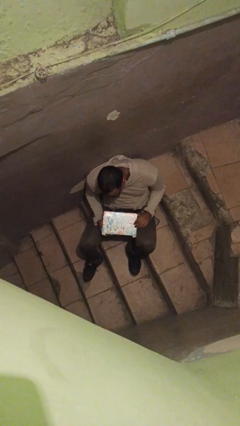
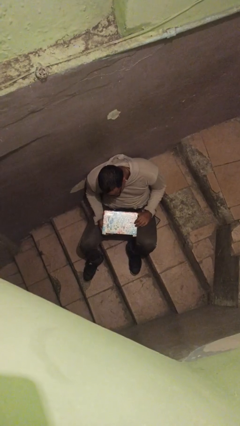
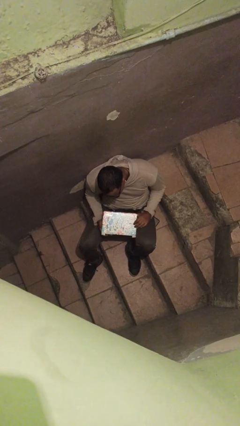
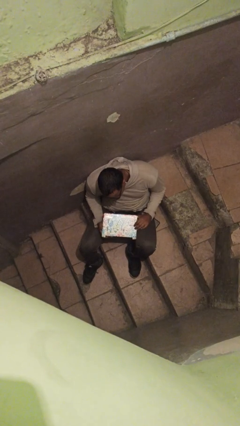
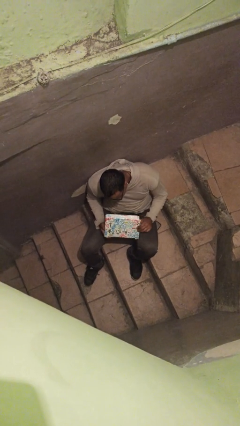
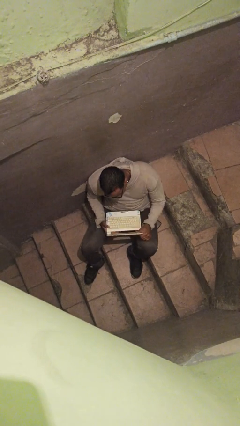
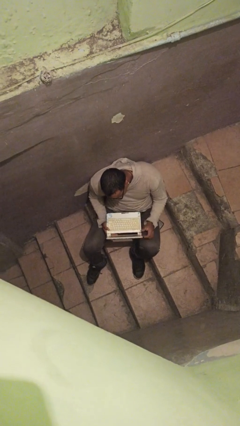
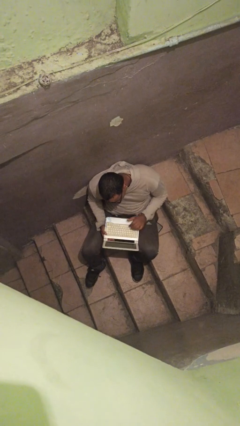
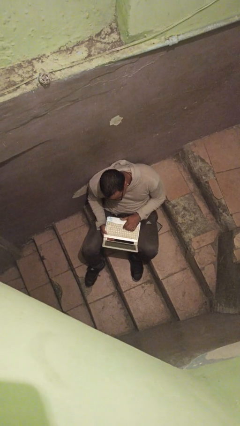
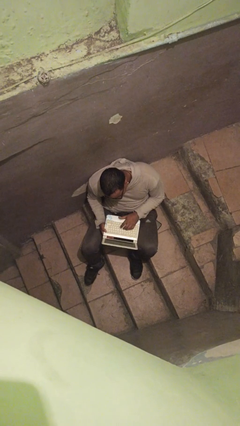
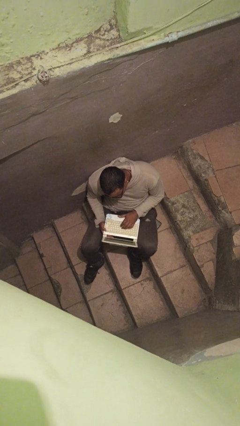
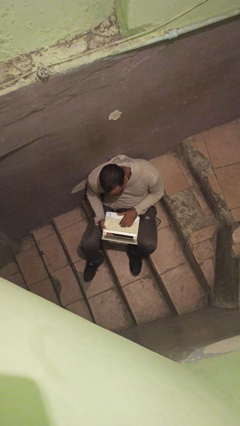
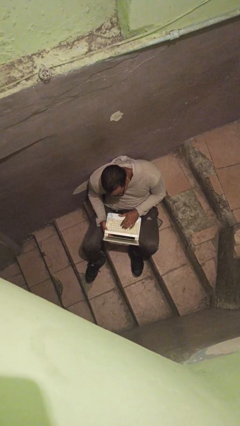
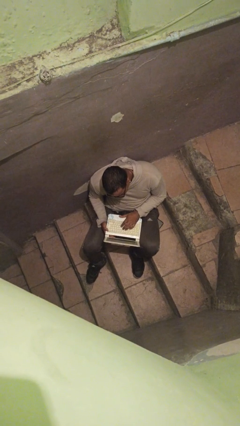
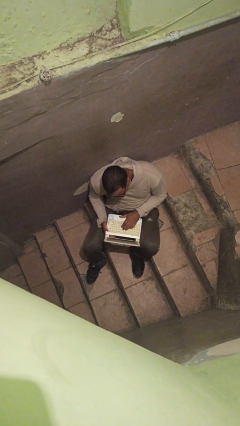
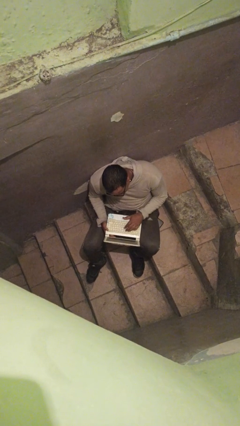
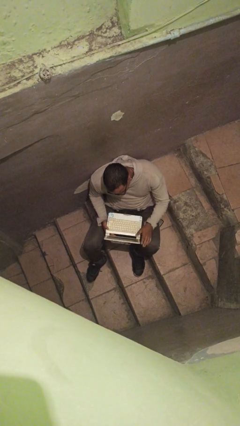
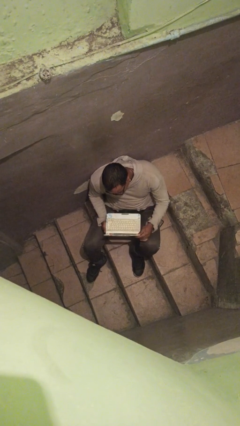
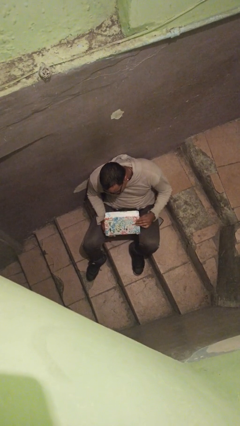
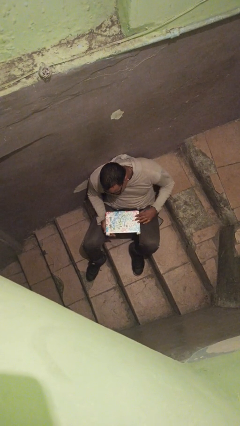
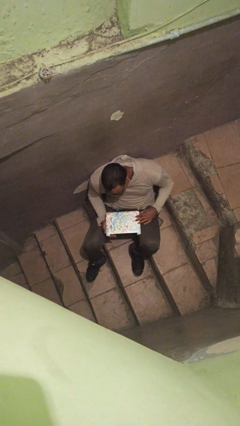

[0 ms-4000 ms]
person interacts with laptop

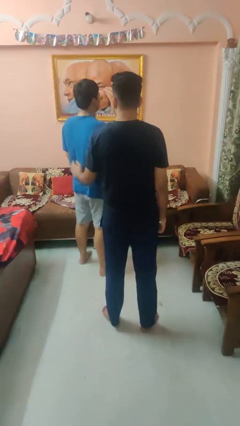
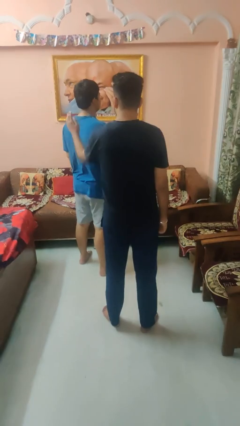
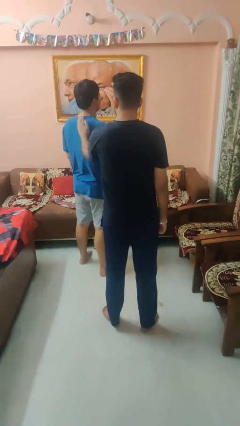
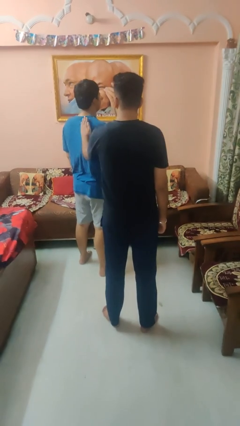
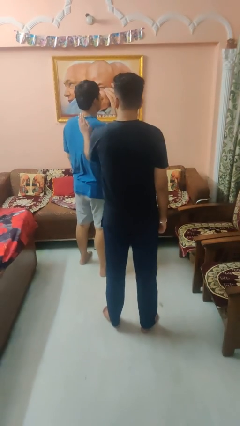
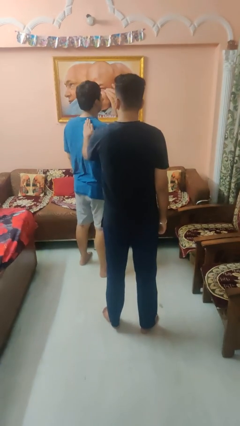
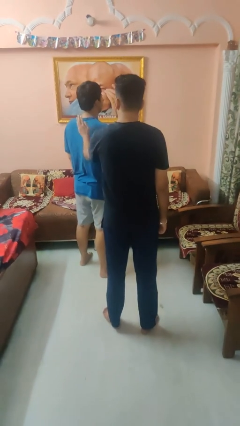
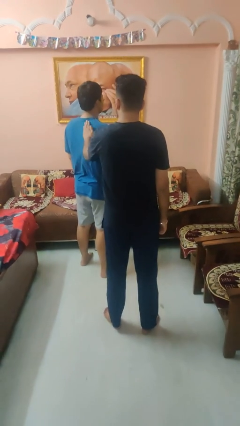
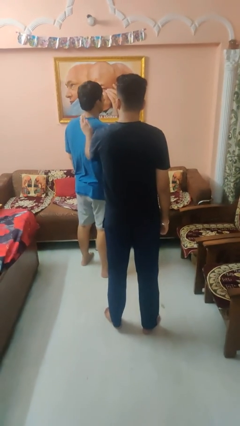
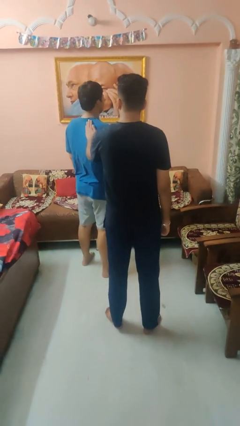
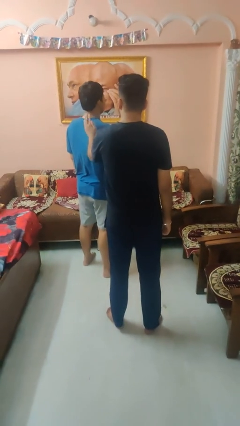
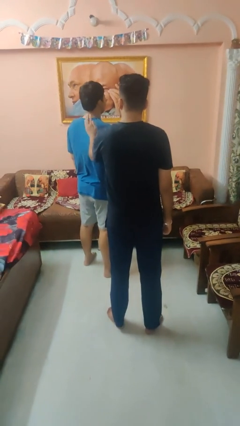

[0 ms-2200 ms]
person touches back of person

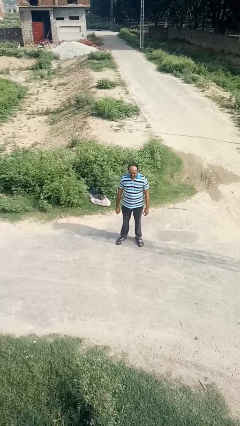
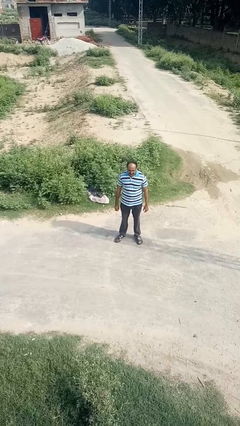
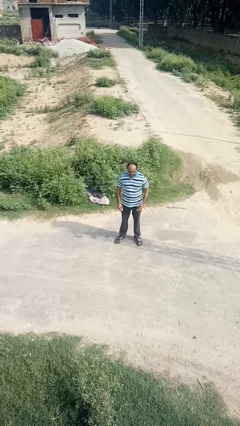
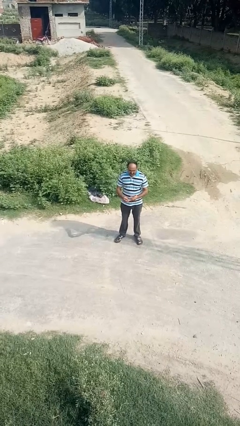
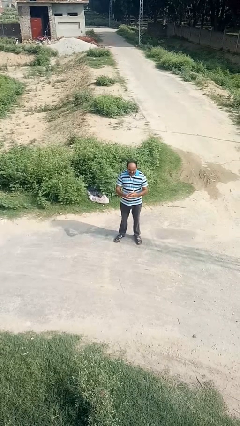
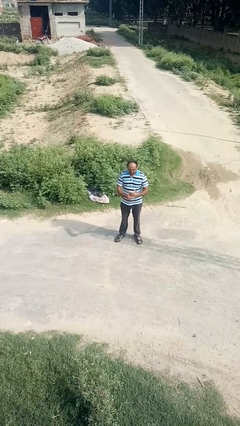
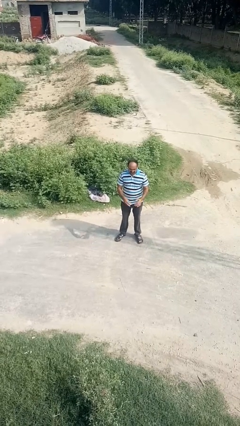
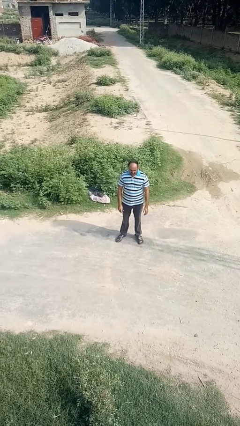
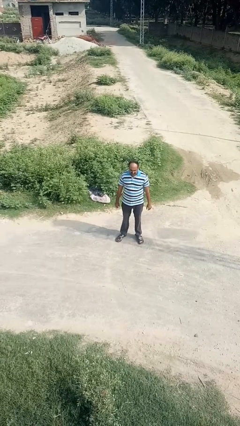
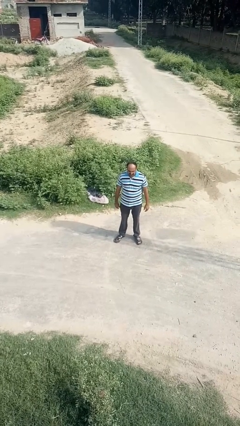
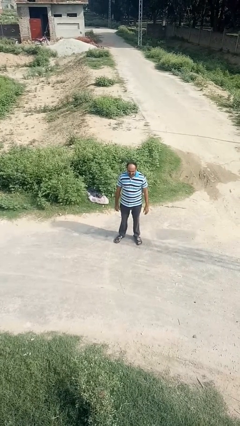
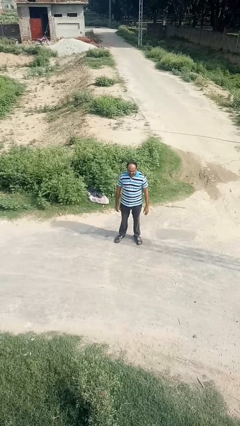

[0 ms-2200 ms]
person puts on ring

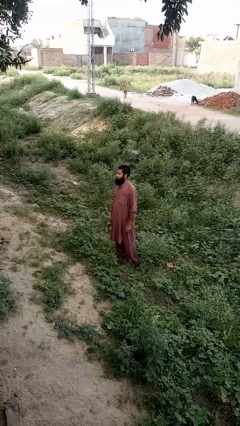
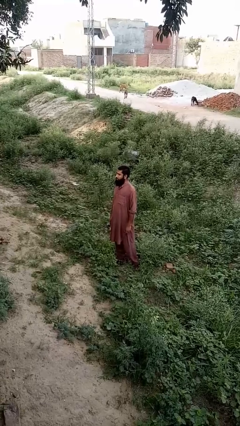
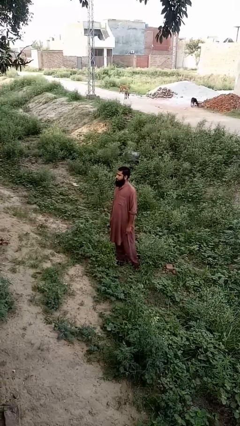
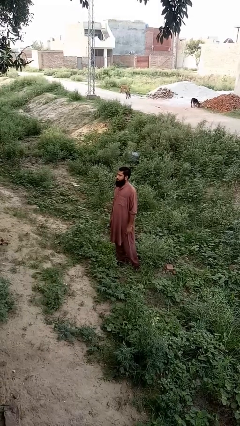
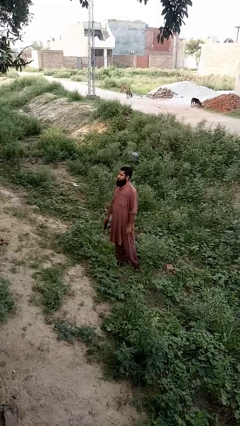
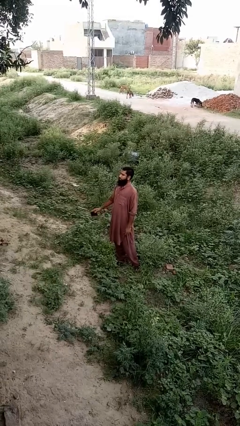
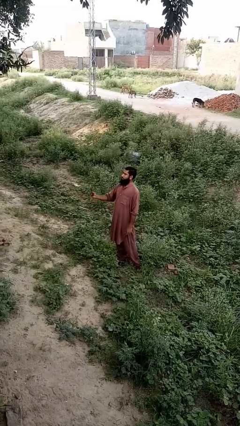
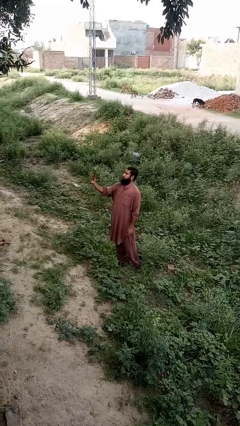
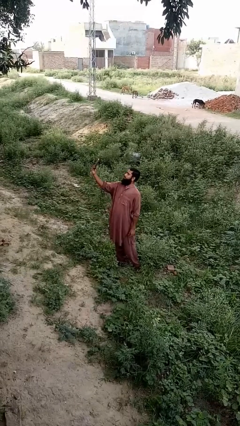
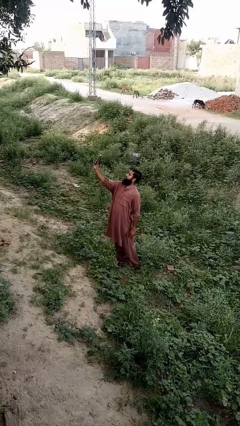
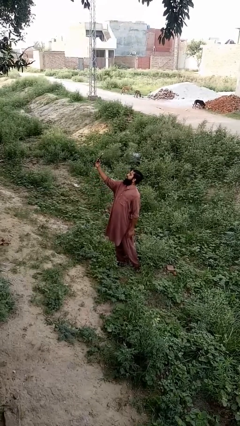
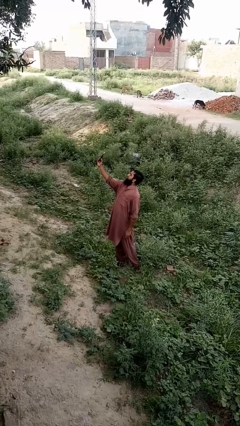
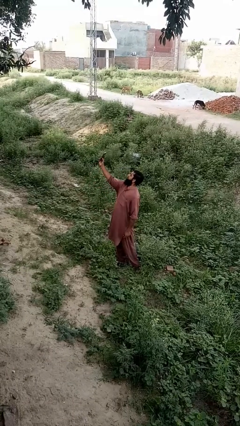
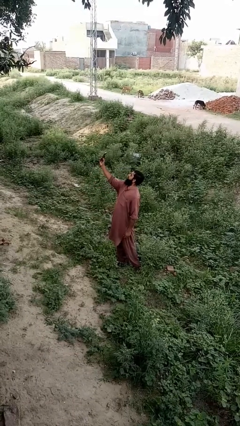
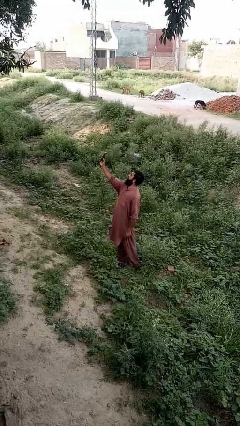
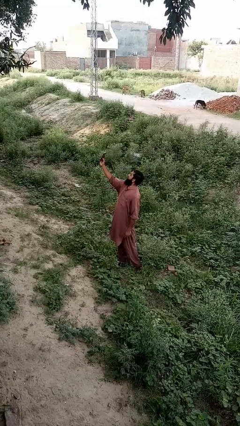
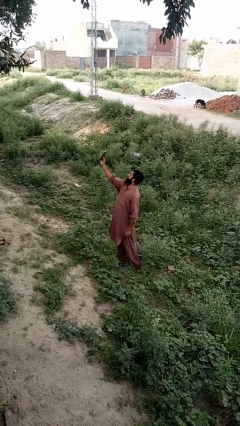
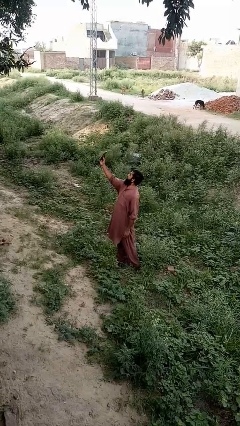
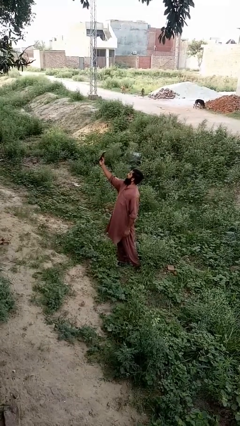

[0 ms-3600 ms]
person takes selfie

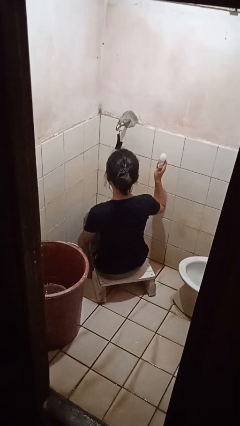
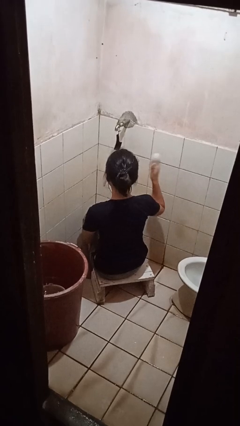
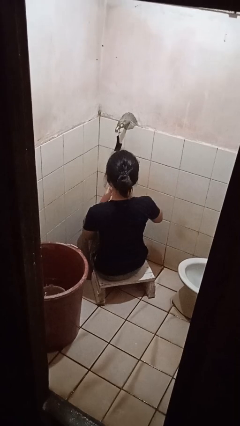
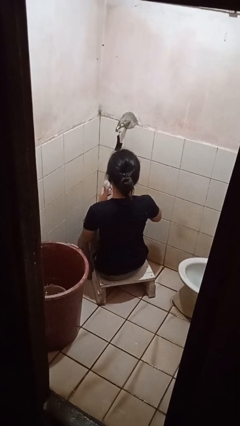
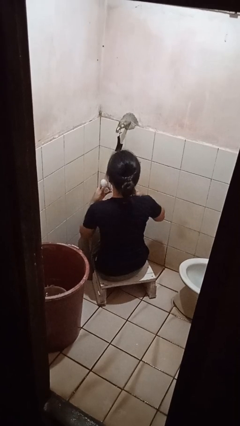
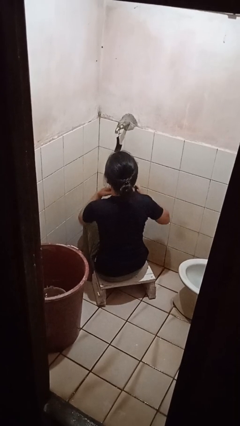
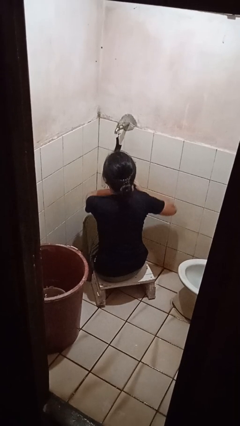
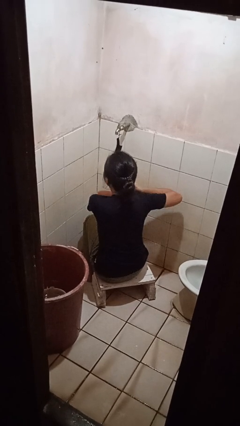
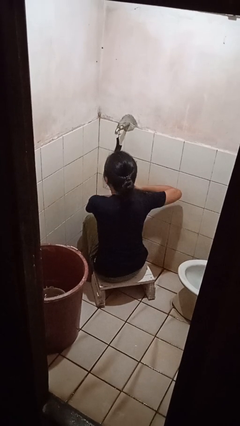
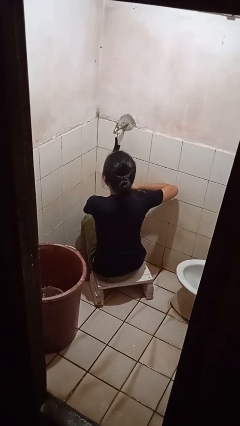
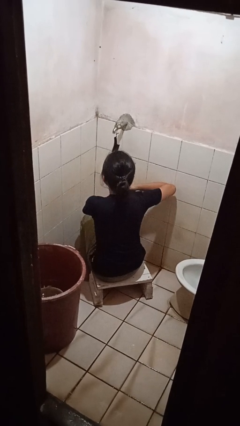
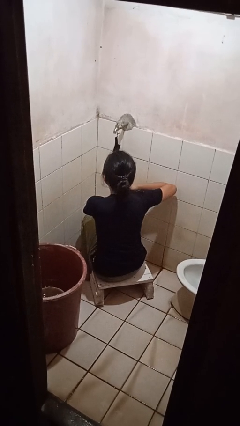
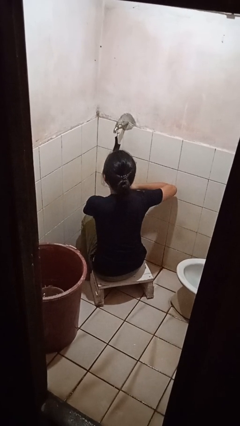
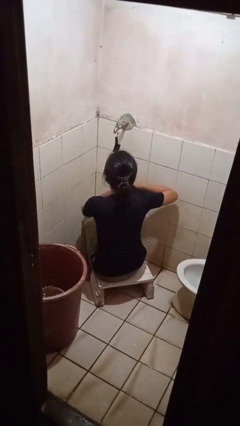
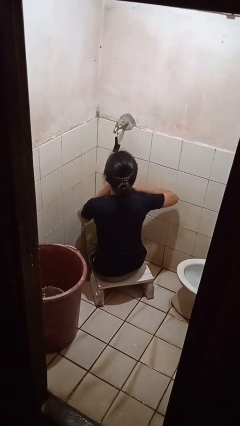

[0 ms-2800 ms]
person applies deodorant

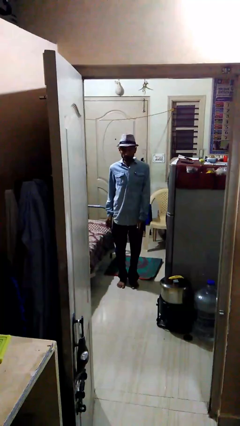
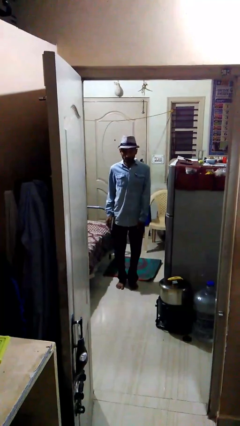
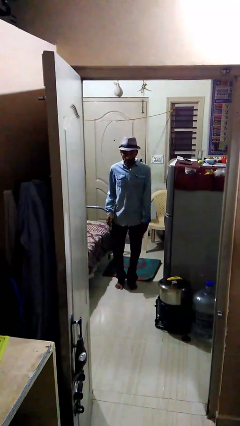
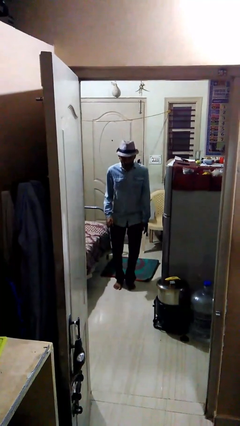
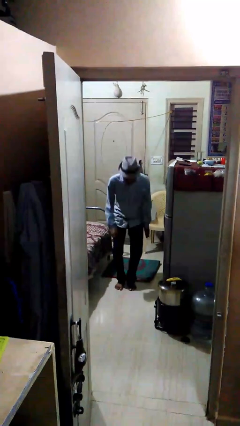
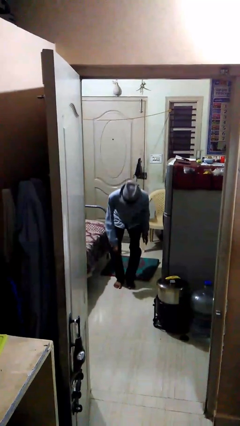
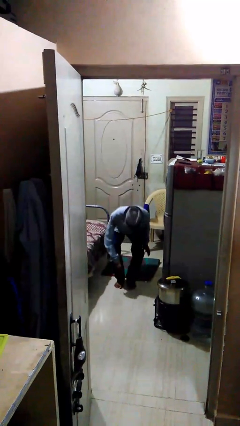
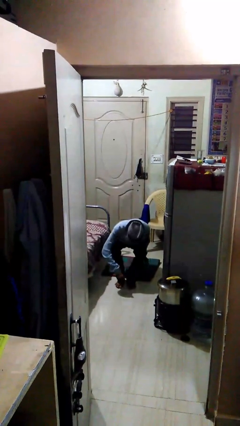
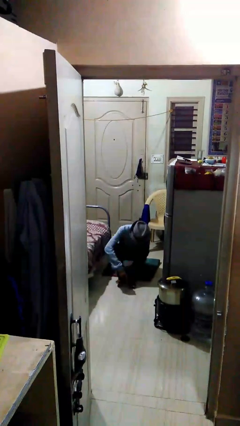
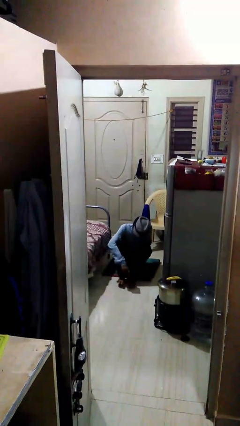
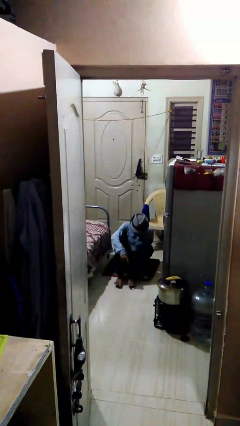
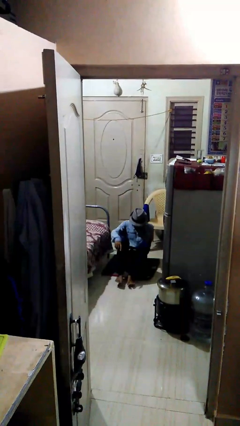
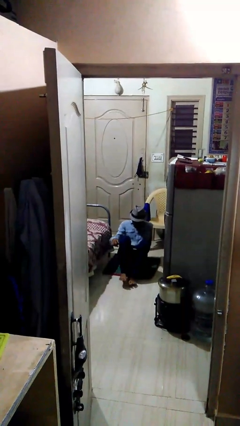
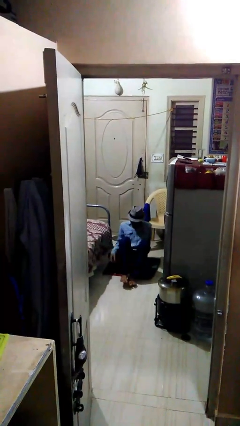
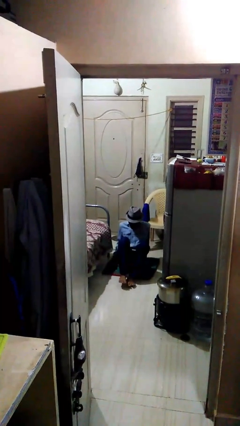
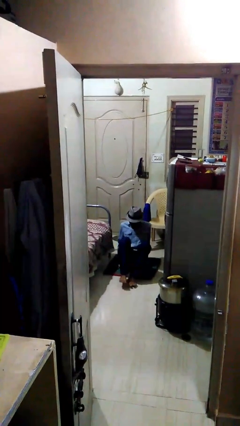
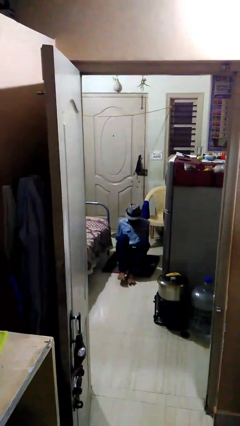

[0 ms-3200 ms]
person sits down
